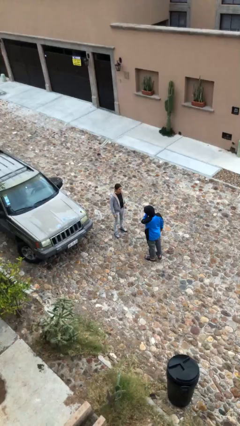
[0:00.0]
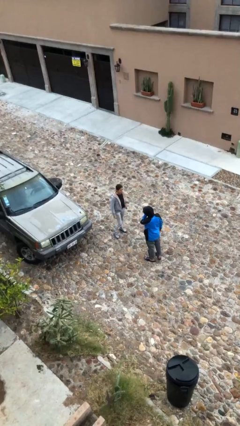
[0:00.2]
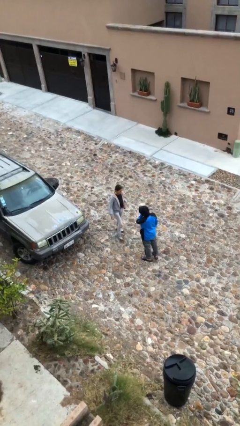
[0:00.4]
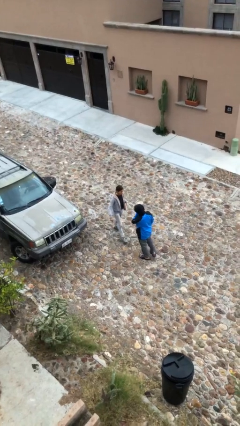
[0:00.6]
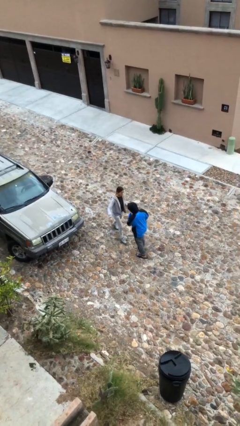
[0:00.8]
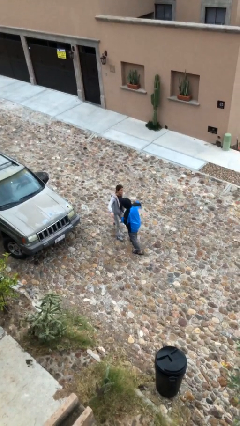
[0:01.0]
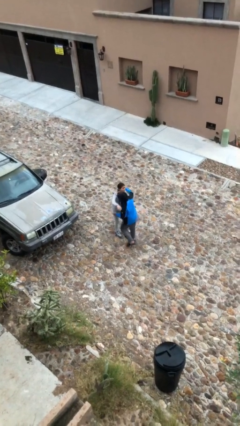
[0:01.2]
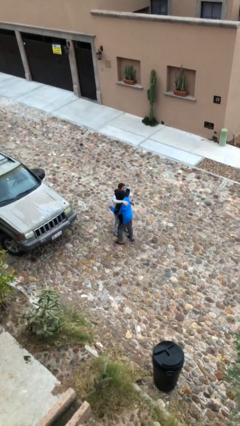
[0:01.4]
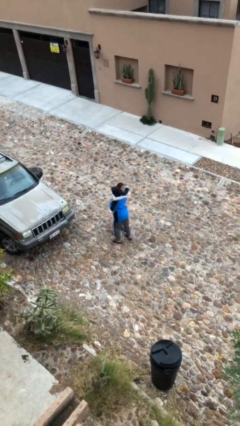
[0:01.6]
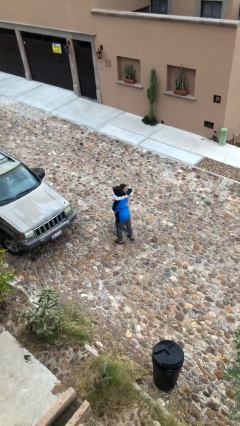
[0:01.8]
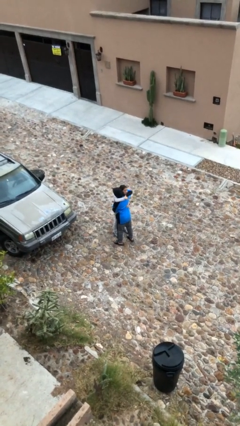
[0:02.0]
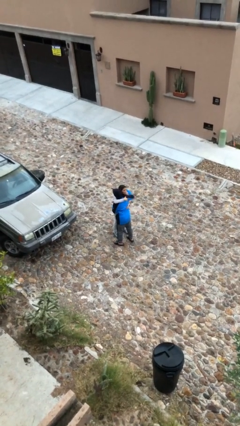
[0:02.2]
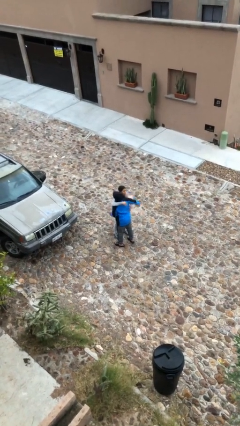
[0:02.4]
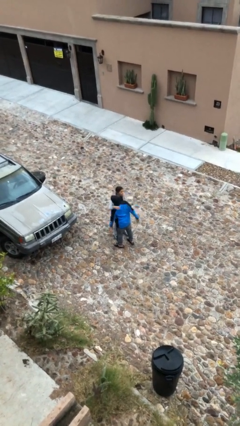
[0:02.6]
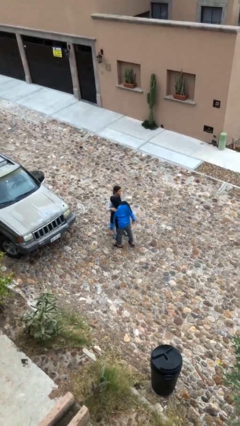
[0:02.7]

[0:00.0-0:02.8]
person embraces person

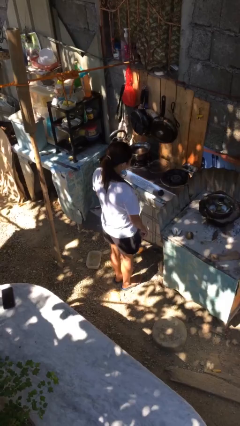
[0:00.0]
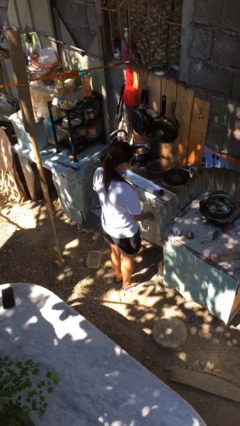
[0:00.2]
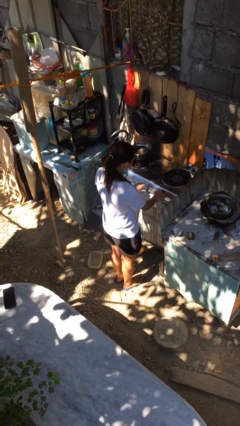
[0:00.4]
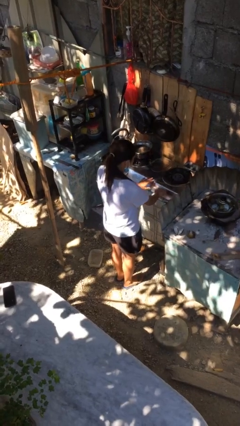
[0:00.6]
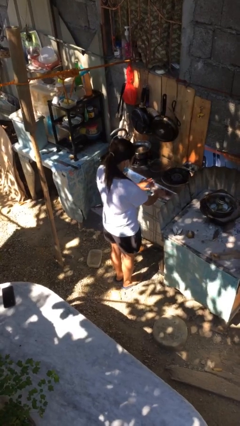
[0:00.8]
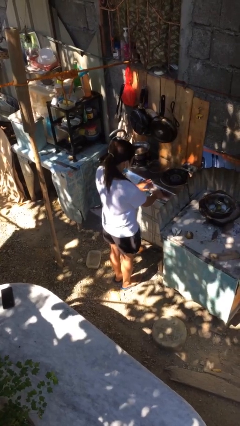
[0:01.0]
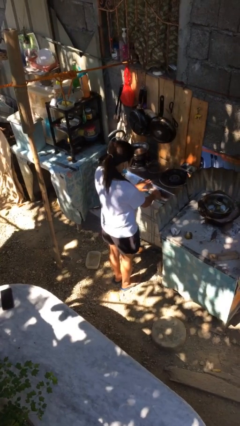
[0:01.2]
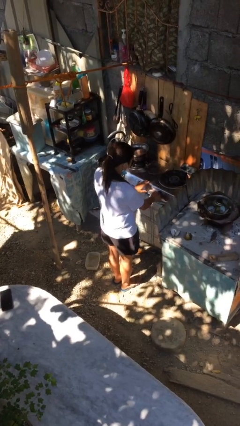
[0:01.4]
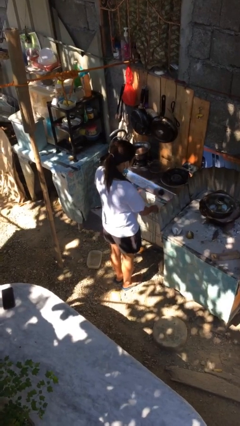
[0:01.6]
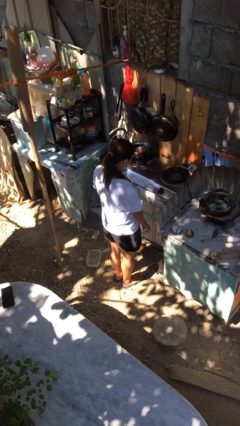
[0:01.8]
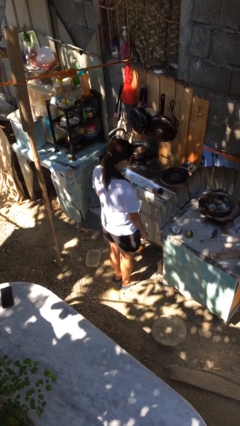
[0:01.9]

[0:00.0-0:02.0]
person turns off stovetop

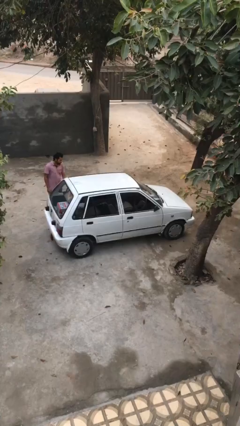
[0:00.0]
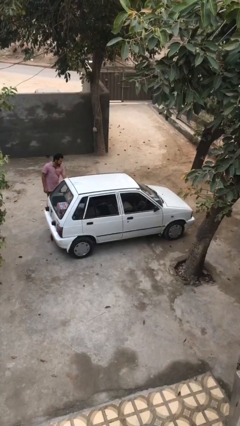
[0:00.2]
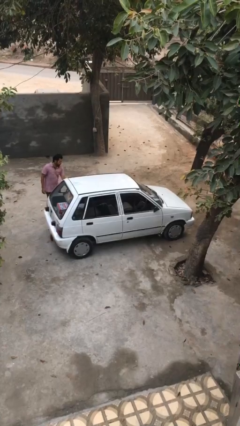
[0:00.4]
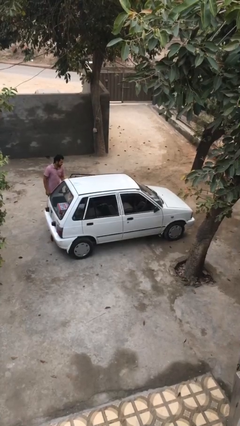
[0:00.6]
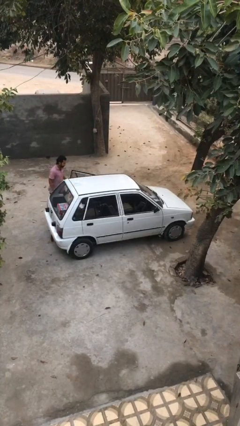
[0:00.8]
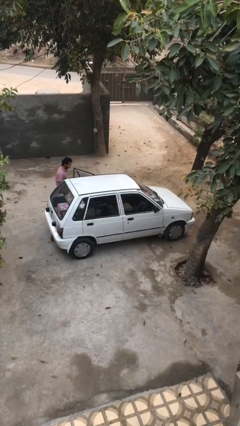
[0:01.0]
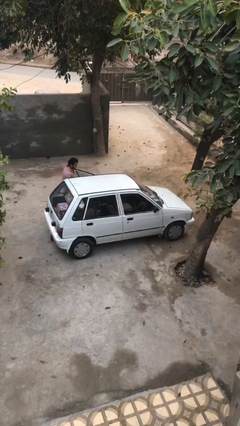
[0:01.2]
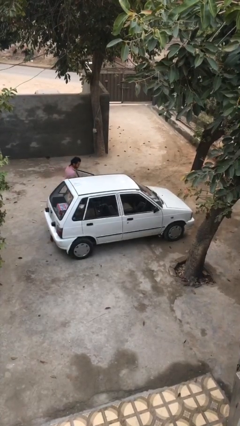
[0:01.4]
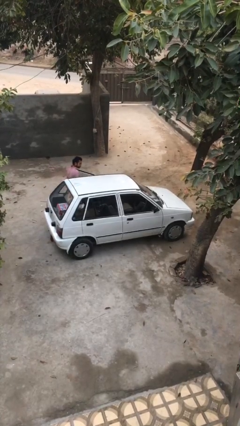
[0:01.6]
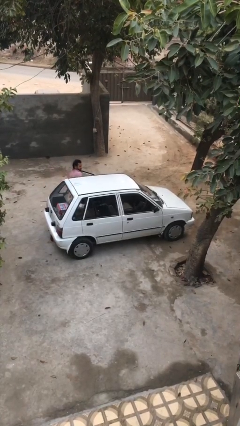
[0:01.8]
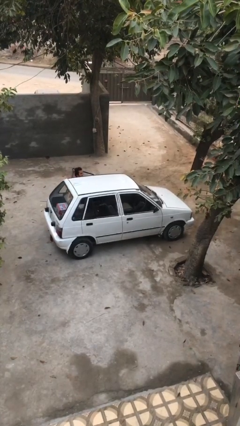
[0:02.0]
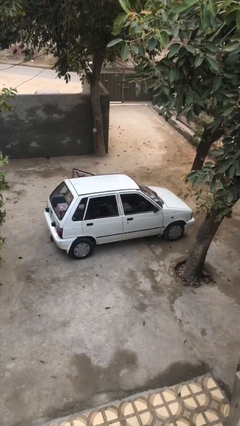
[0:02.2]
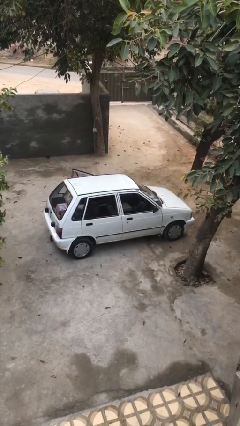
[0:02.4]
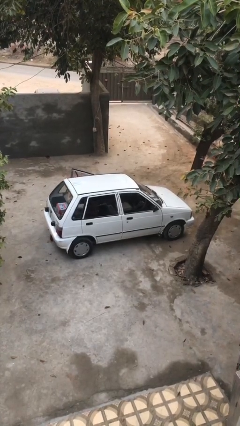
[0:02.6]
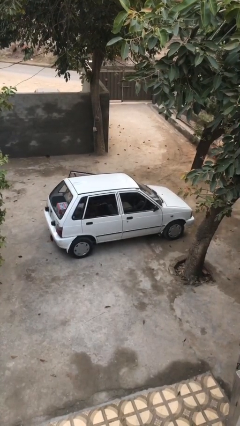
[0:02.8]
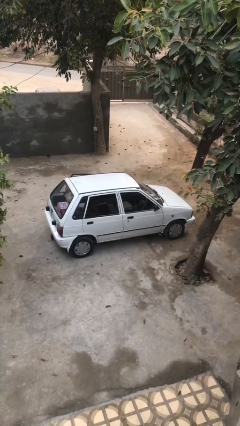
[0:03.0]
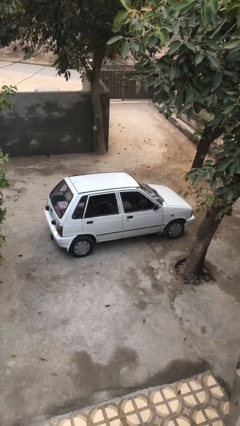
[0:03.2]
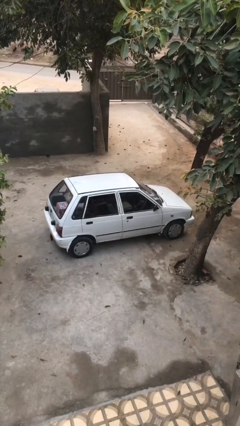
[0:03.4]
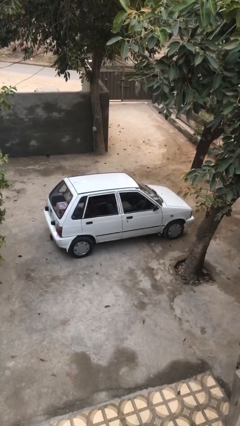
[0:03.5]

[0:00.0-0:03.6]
car picks up person

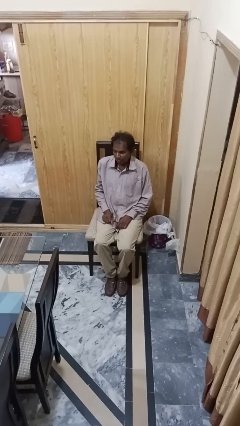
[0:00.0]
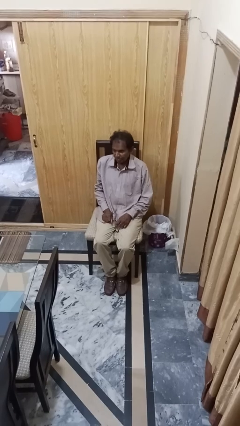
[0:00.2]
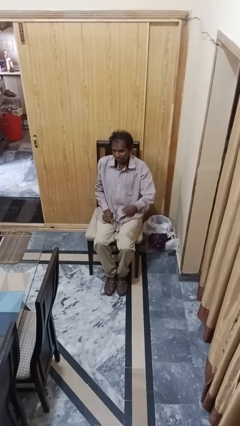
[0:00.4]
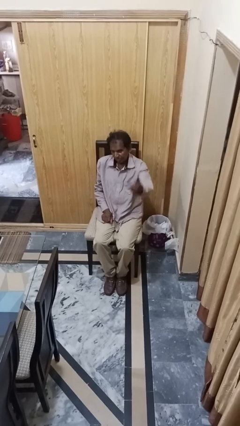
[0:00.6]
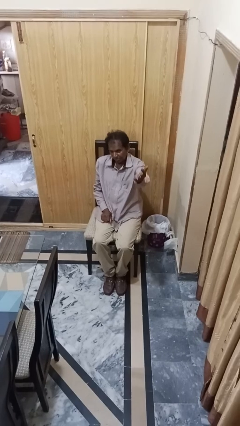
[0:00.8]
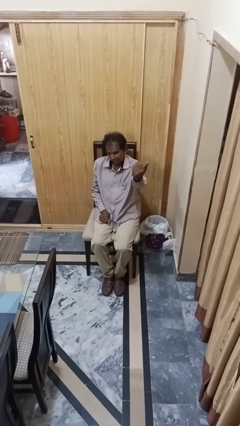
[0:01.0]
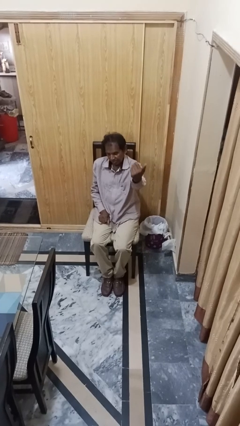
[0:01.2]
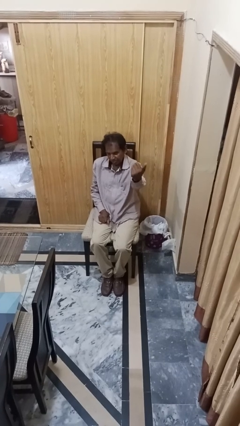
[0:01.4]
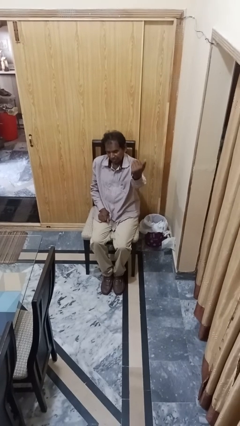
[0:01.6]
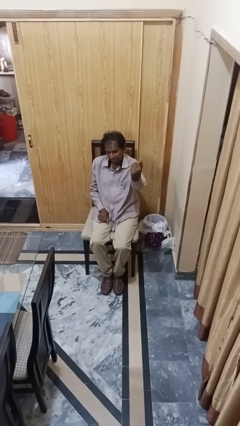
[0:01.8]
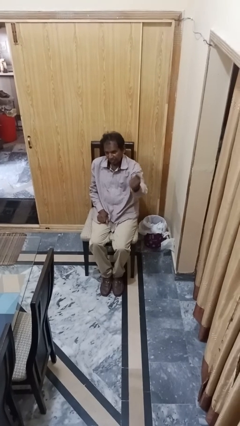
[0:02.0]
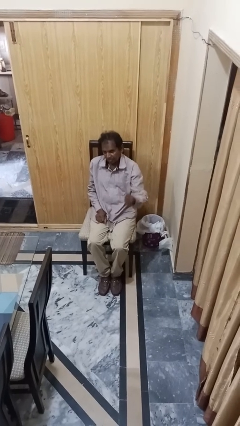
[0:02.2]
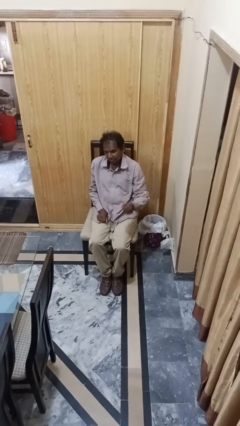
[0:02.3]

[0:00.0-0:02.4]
person gestures come here

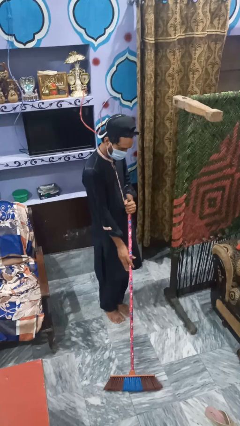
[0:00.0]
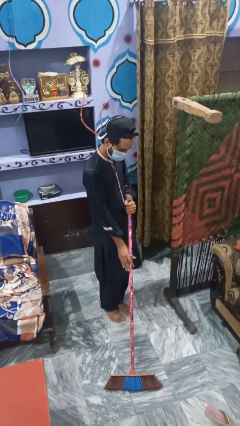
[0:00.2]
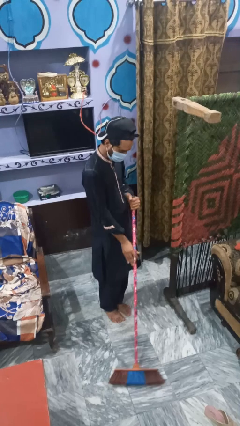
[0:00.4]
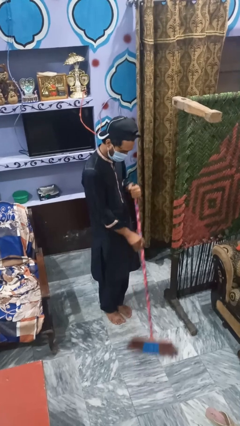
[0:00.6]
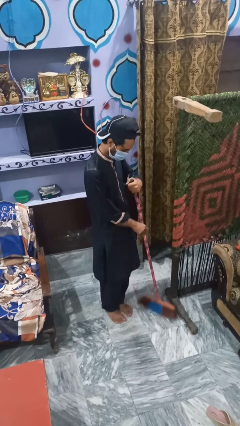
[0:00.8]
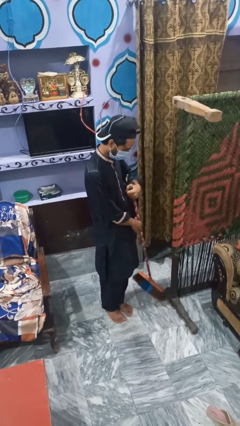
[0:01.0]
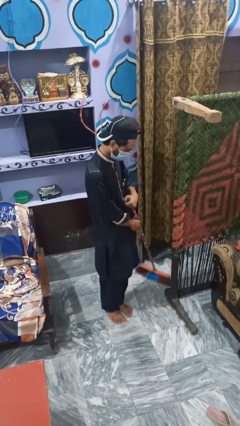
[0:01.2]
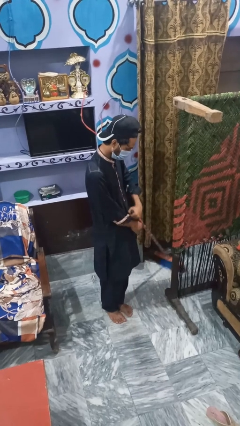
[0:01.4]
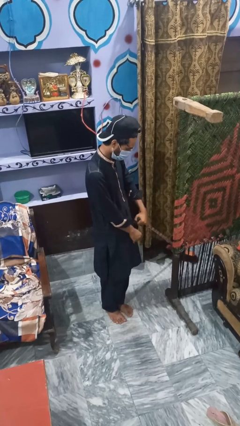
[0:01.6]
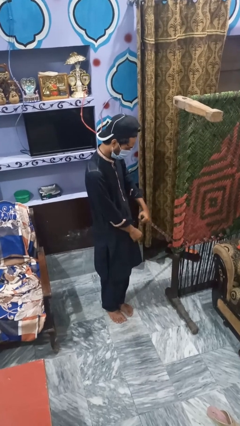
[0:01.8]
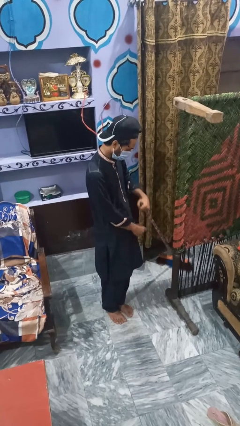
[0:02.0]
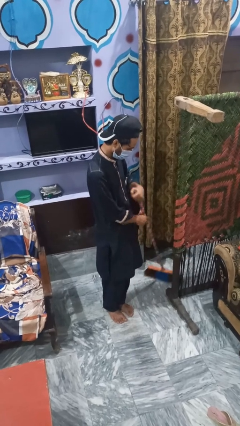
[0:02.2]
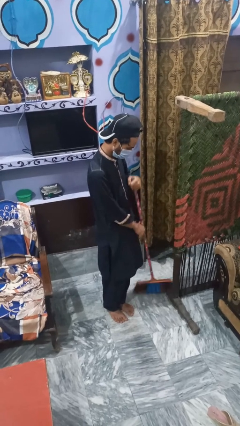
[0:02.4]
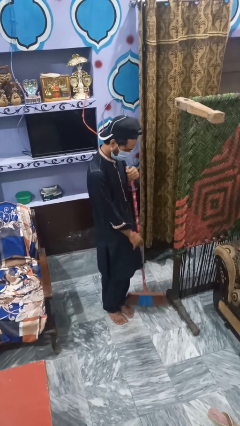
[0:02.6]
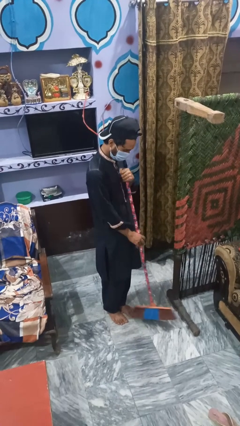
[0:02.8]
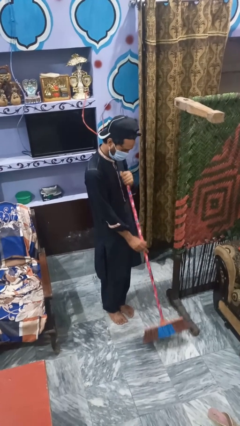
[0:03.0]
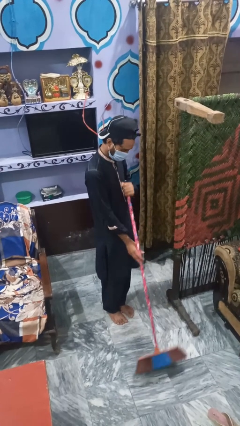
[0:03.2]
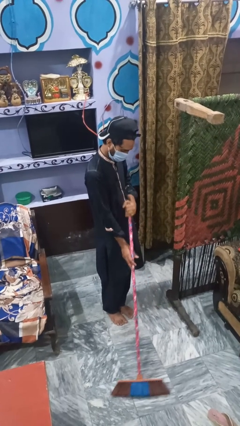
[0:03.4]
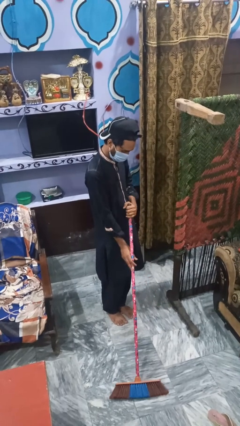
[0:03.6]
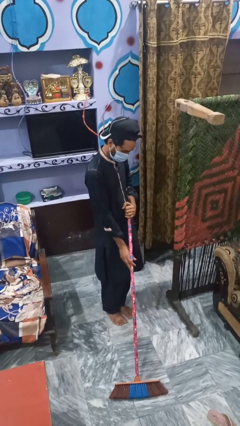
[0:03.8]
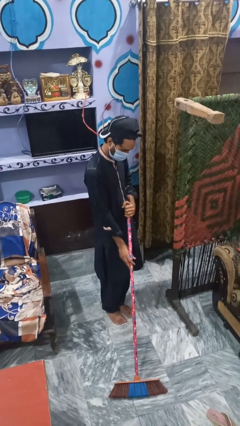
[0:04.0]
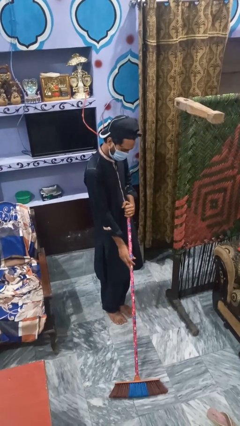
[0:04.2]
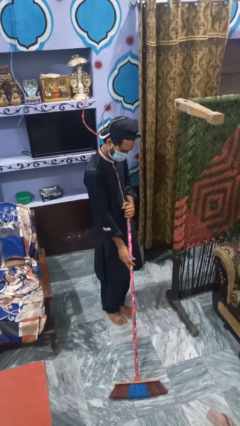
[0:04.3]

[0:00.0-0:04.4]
person mops

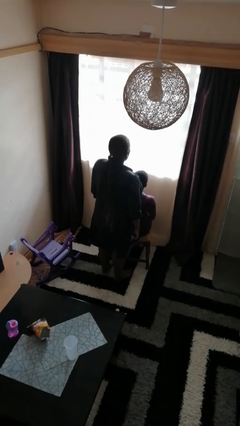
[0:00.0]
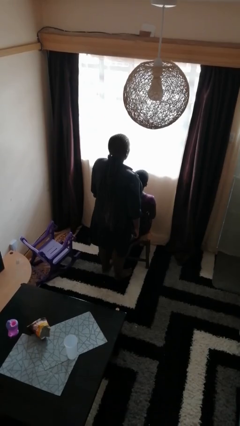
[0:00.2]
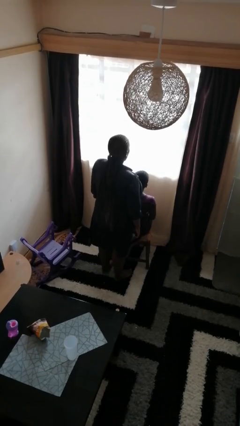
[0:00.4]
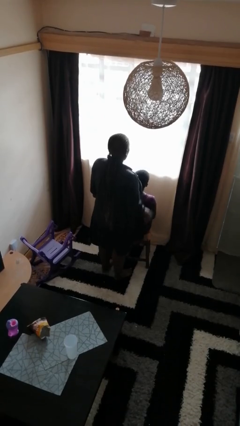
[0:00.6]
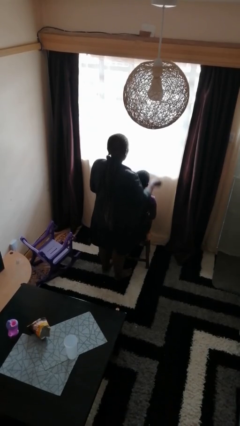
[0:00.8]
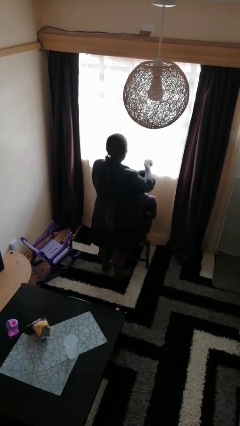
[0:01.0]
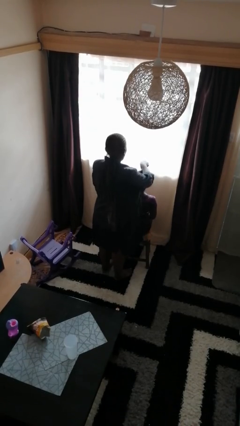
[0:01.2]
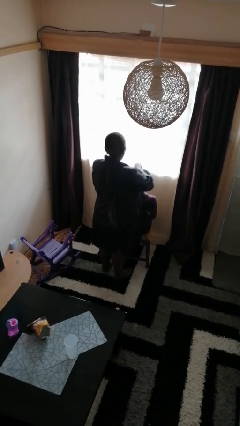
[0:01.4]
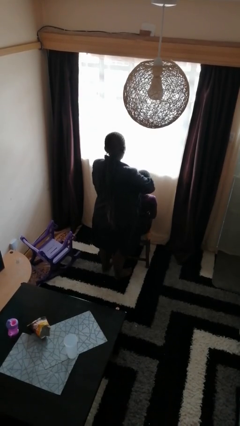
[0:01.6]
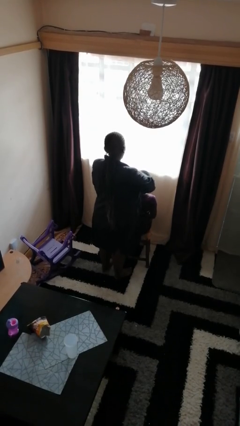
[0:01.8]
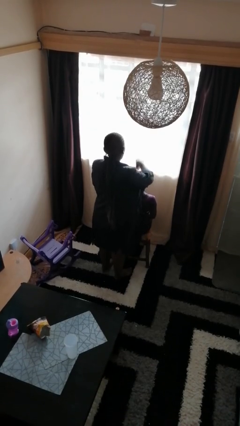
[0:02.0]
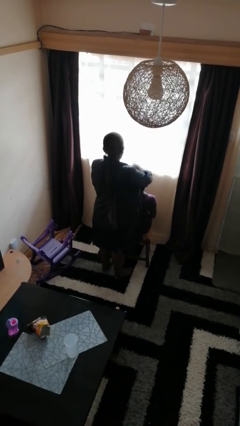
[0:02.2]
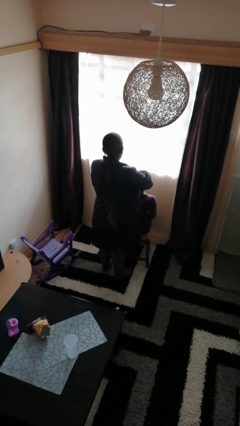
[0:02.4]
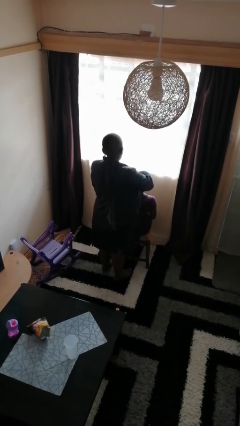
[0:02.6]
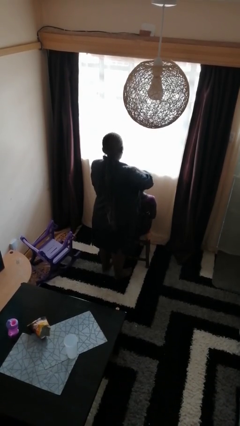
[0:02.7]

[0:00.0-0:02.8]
person brushes hair of person
